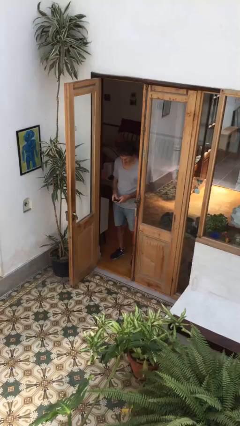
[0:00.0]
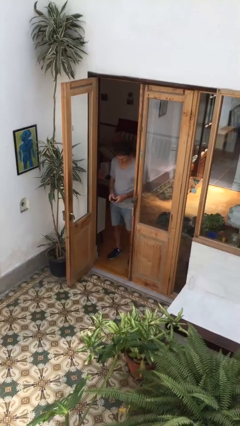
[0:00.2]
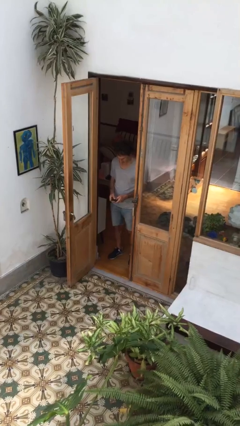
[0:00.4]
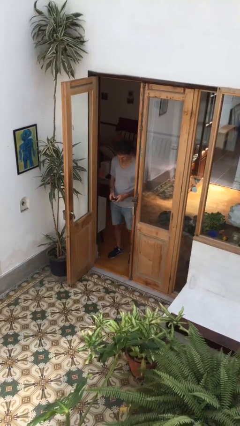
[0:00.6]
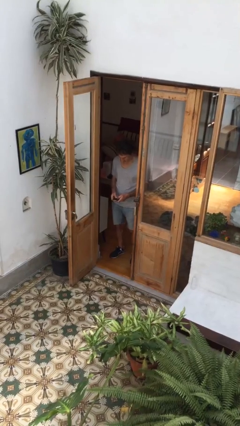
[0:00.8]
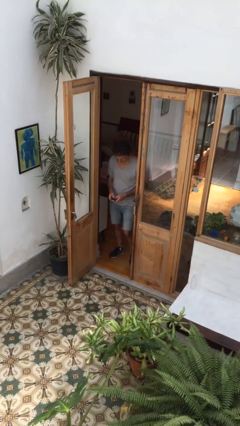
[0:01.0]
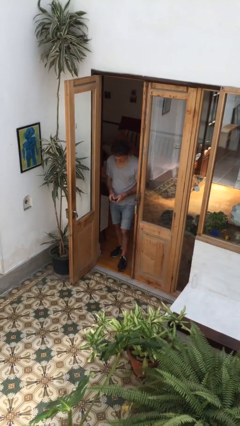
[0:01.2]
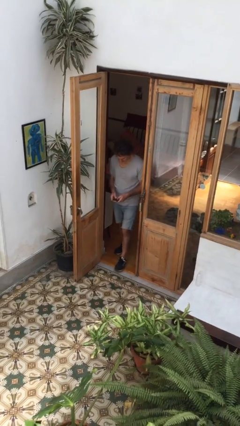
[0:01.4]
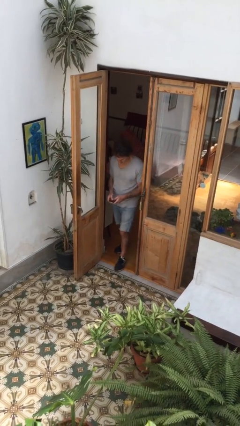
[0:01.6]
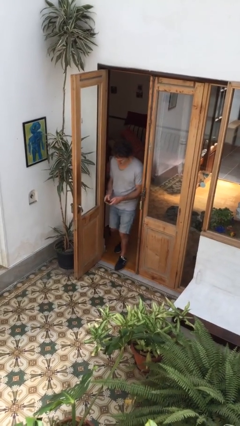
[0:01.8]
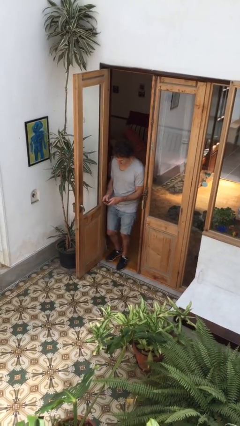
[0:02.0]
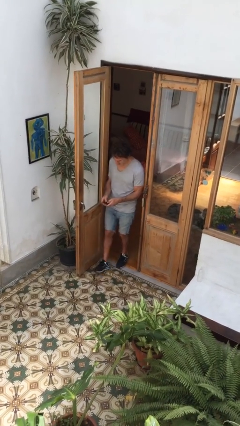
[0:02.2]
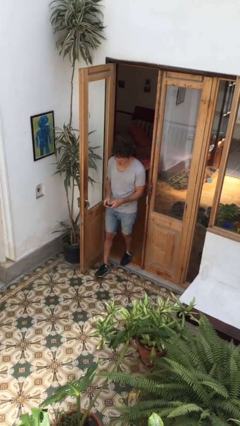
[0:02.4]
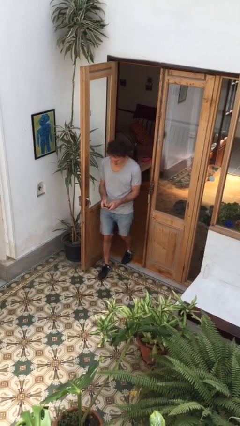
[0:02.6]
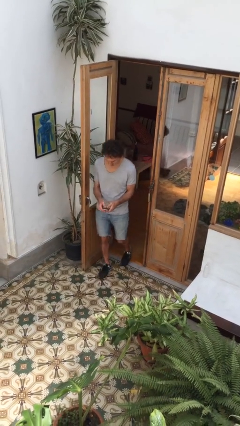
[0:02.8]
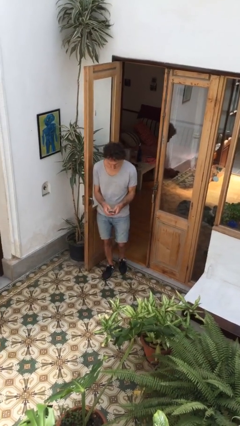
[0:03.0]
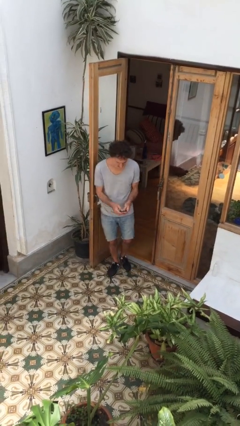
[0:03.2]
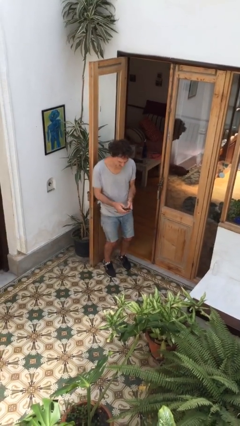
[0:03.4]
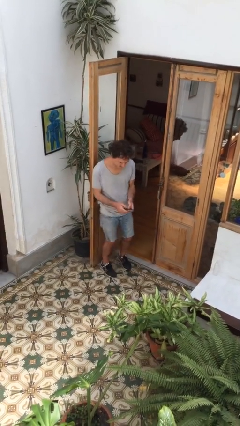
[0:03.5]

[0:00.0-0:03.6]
person enters scene through structure

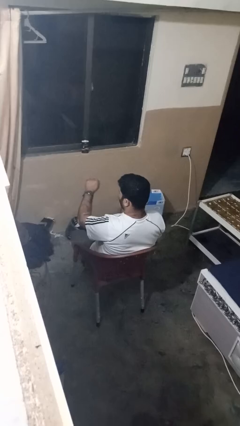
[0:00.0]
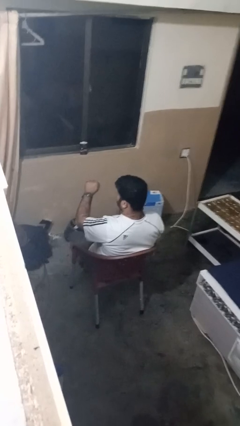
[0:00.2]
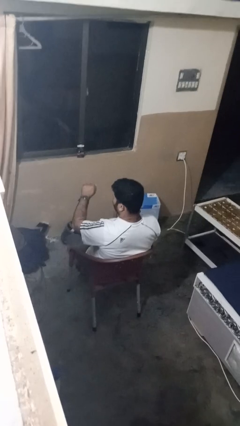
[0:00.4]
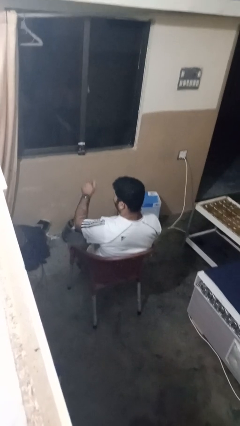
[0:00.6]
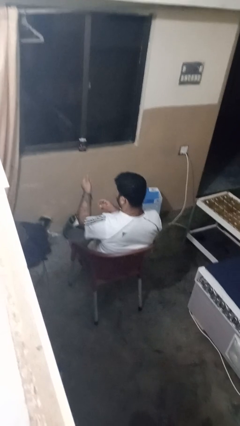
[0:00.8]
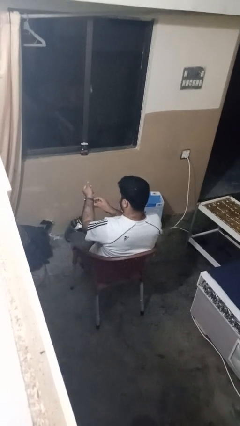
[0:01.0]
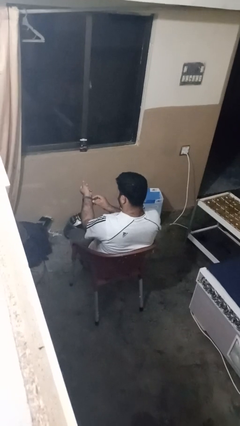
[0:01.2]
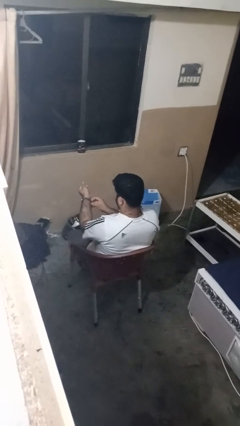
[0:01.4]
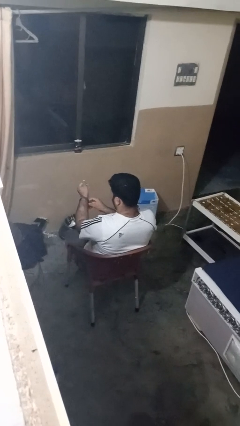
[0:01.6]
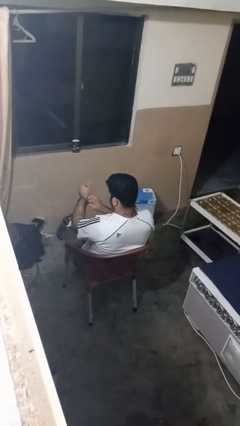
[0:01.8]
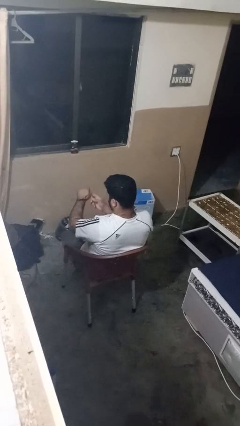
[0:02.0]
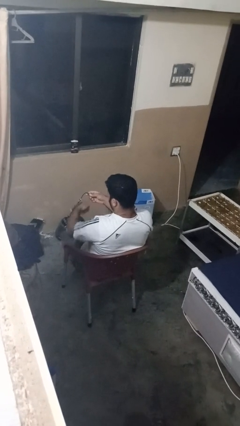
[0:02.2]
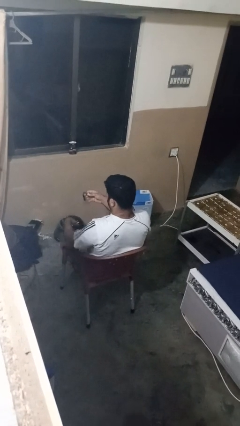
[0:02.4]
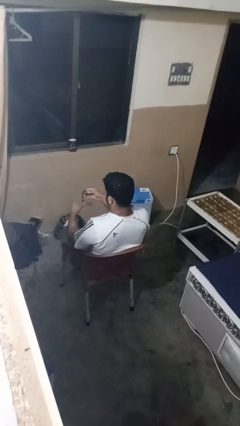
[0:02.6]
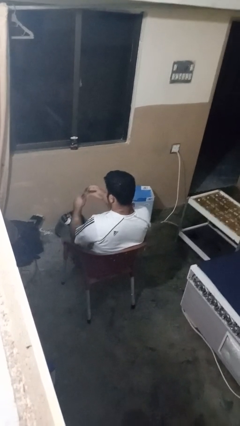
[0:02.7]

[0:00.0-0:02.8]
person takes off wristwatch

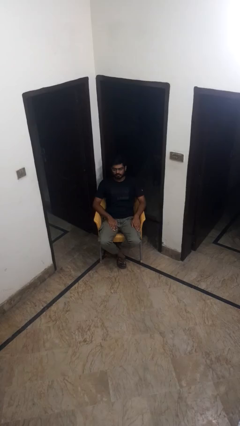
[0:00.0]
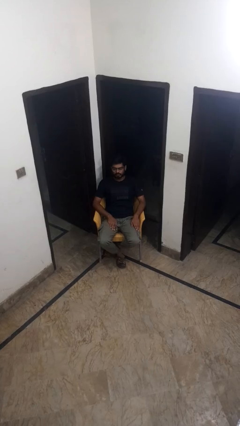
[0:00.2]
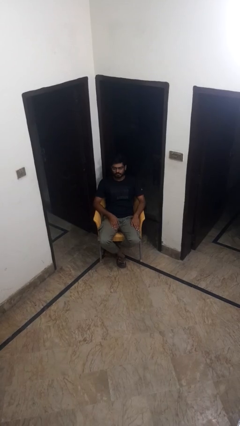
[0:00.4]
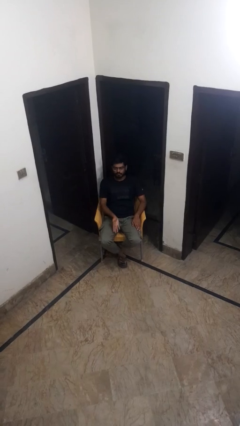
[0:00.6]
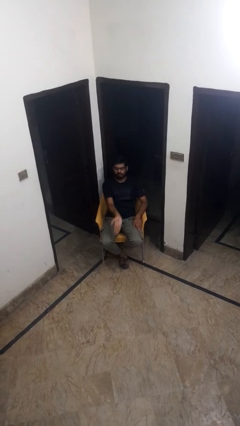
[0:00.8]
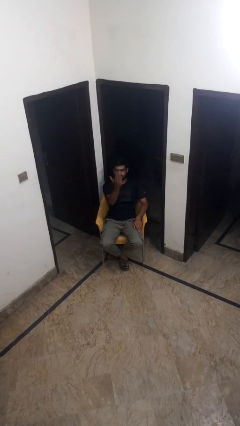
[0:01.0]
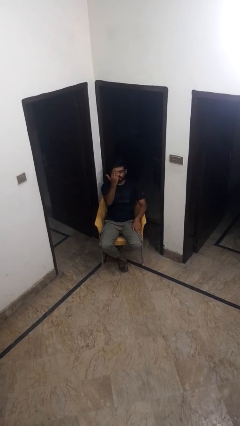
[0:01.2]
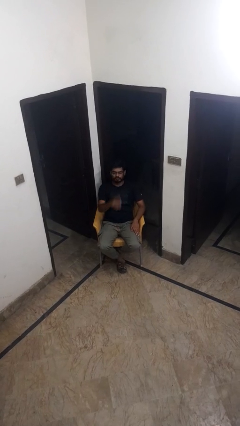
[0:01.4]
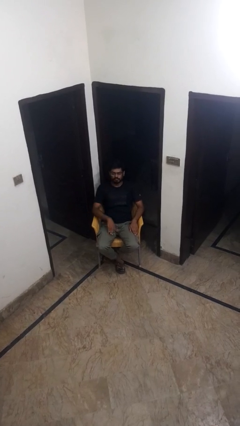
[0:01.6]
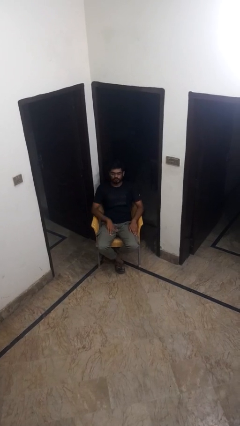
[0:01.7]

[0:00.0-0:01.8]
person gestures swipe up

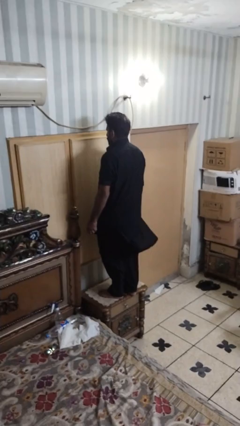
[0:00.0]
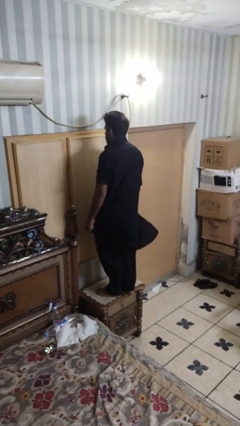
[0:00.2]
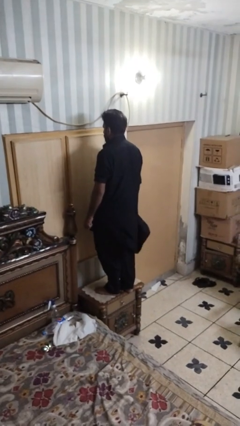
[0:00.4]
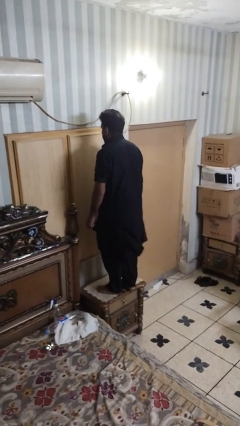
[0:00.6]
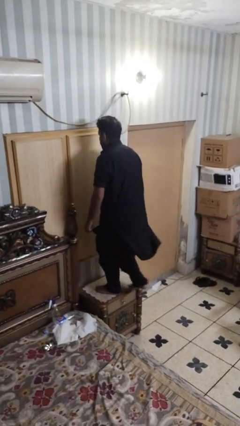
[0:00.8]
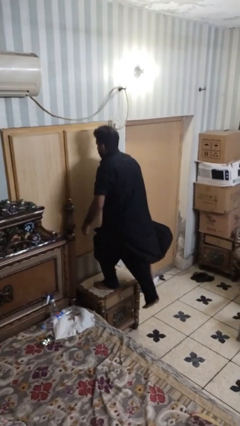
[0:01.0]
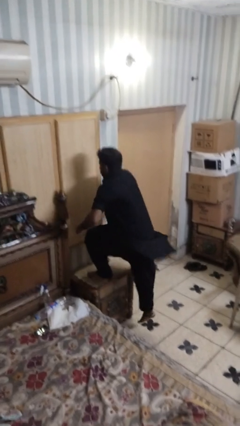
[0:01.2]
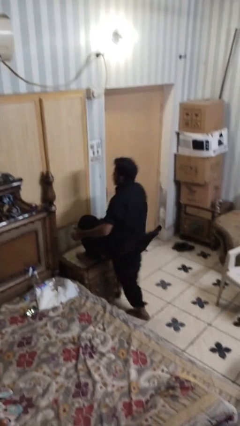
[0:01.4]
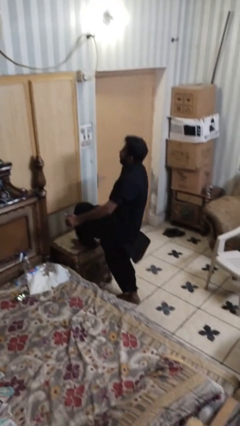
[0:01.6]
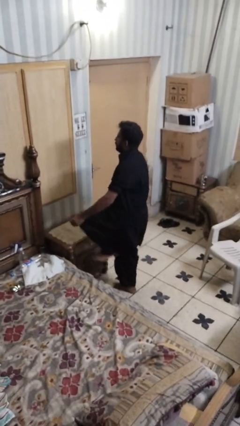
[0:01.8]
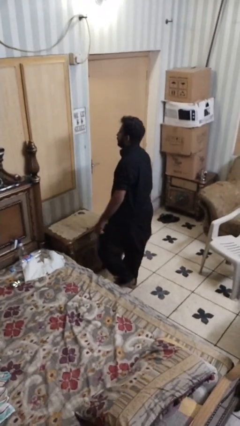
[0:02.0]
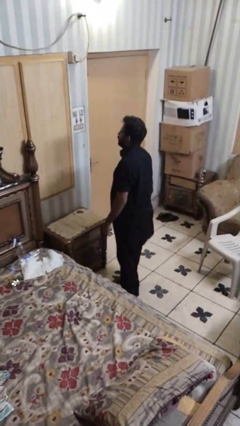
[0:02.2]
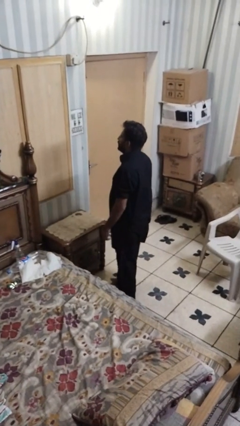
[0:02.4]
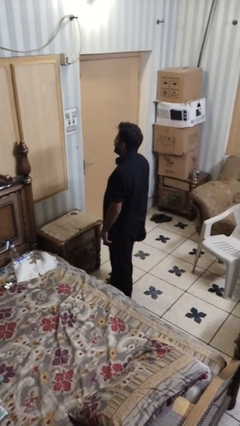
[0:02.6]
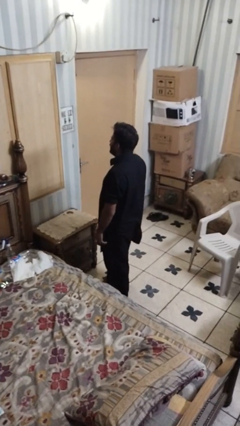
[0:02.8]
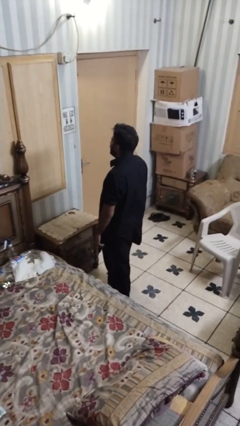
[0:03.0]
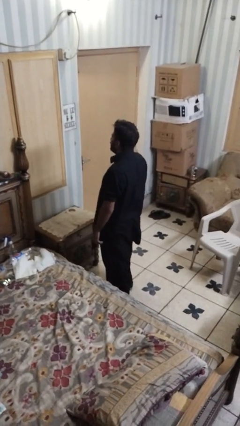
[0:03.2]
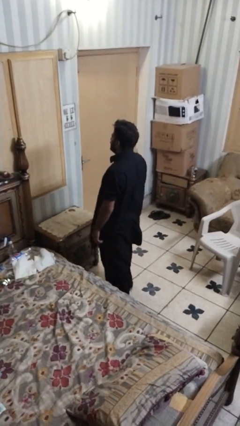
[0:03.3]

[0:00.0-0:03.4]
person climbs off table

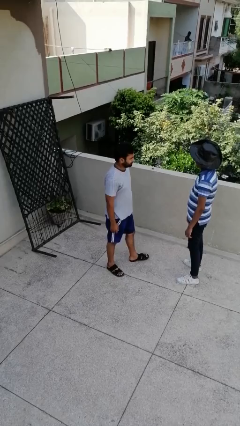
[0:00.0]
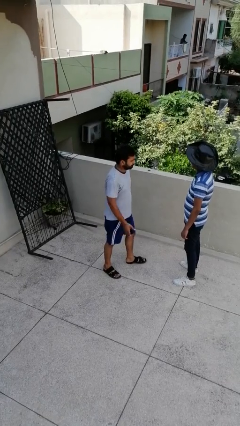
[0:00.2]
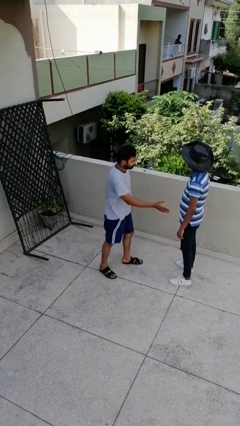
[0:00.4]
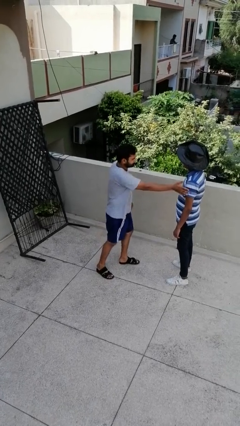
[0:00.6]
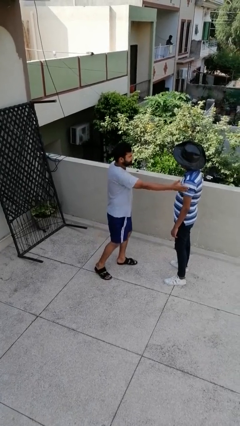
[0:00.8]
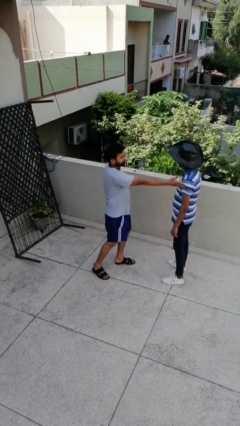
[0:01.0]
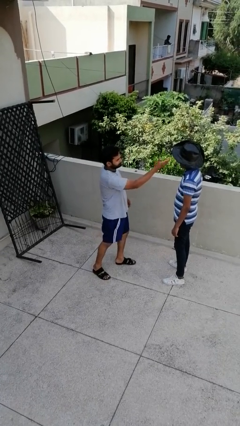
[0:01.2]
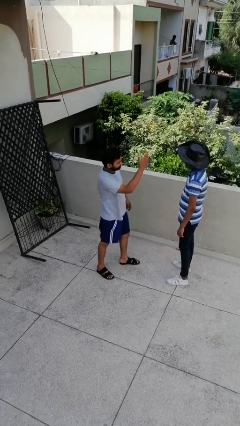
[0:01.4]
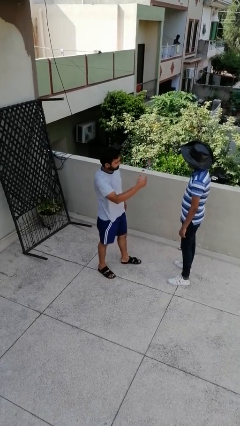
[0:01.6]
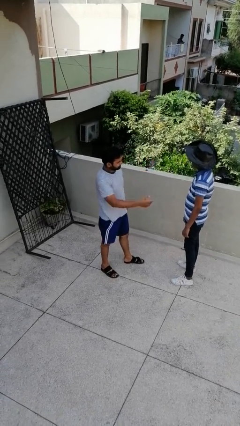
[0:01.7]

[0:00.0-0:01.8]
person shoves person

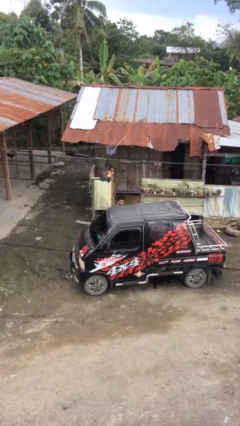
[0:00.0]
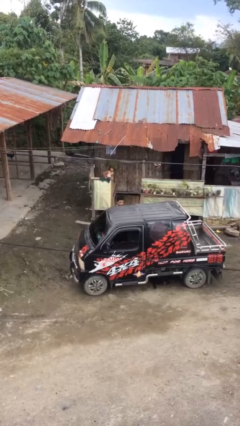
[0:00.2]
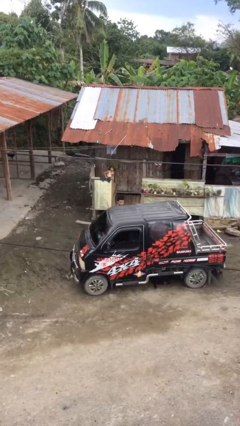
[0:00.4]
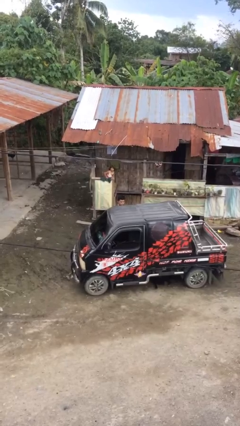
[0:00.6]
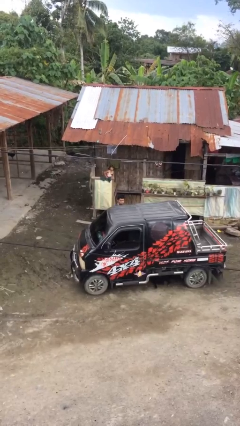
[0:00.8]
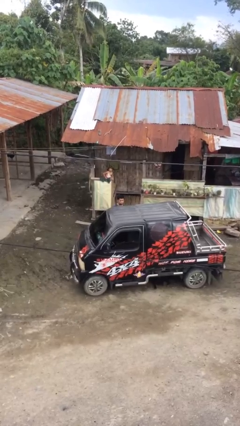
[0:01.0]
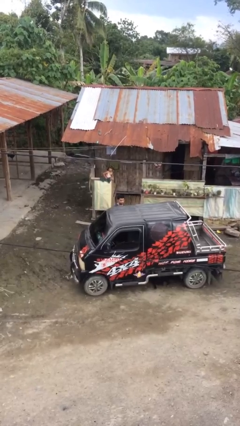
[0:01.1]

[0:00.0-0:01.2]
person closes car door

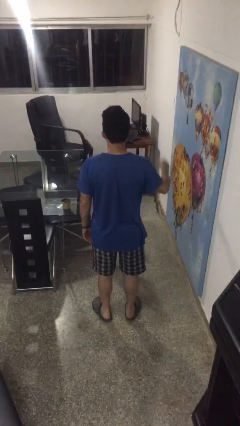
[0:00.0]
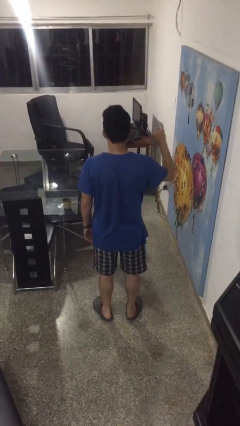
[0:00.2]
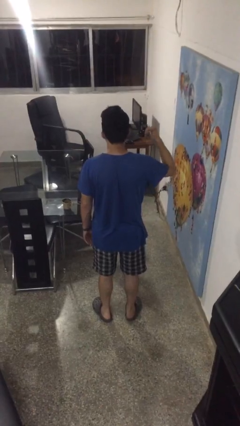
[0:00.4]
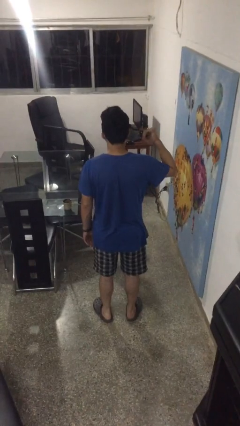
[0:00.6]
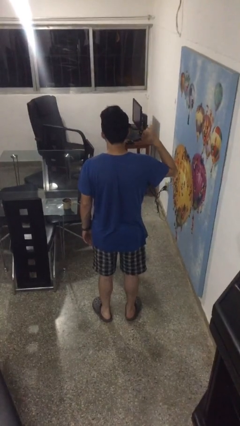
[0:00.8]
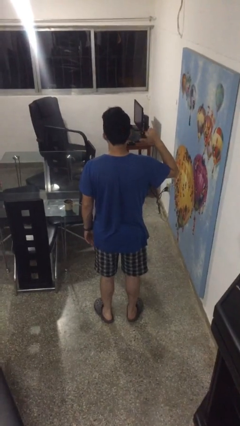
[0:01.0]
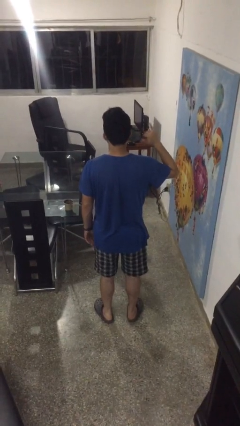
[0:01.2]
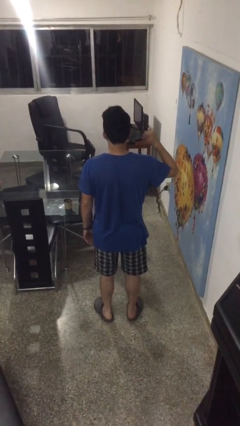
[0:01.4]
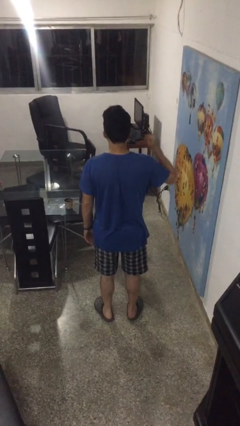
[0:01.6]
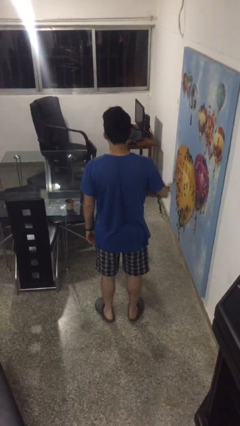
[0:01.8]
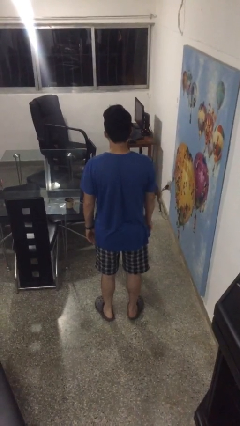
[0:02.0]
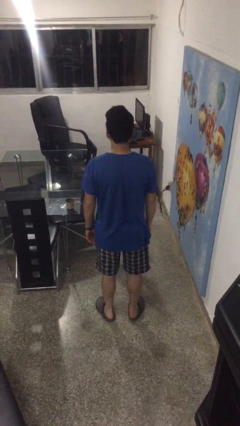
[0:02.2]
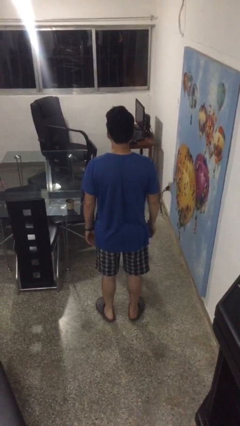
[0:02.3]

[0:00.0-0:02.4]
person gestures hang loose
